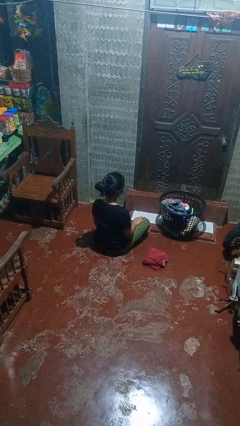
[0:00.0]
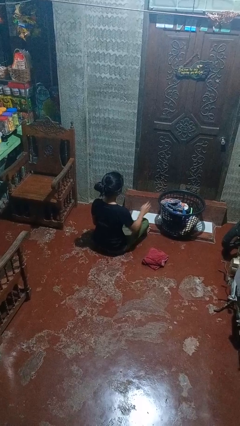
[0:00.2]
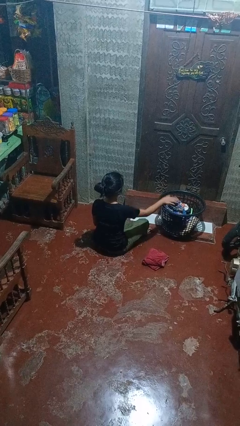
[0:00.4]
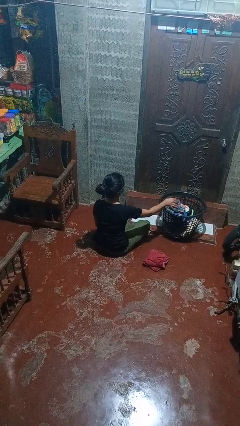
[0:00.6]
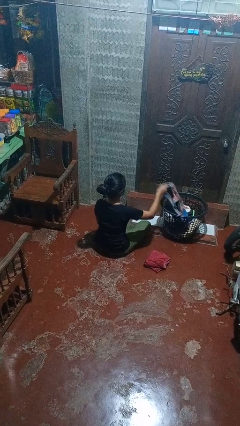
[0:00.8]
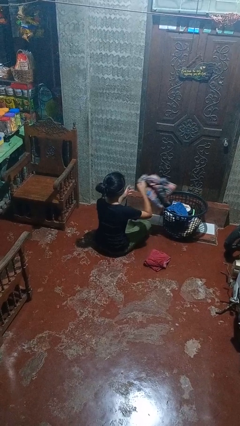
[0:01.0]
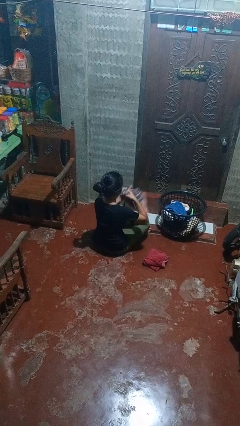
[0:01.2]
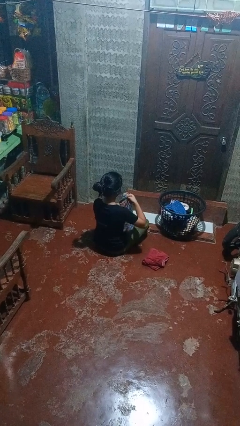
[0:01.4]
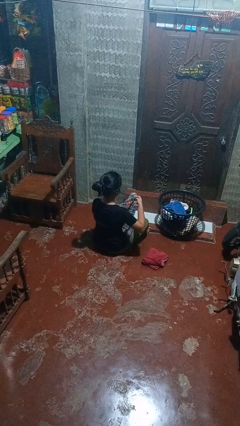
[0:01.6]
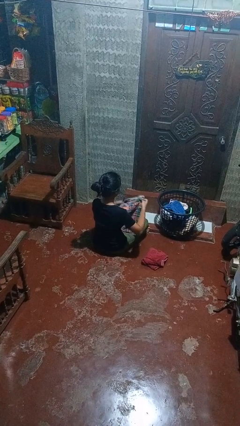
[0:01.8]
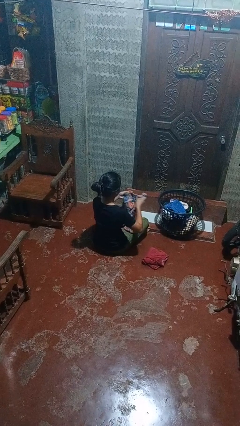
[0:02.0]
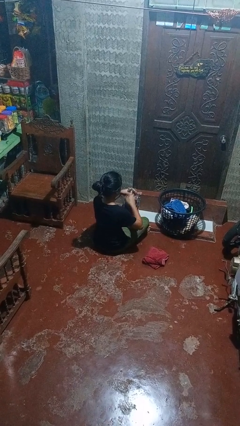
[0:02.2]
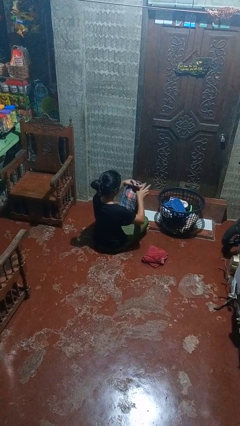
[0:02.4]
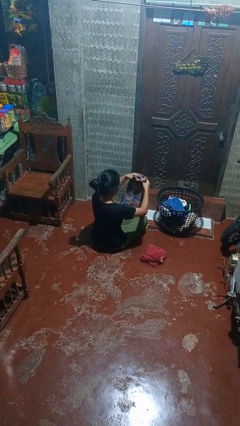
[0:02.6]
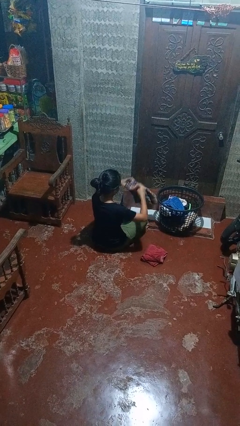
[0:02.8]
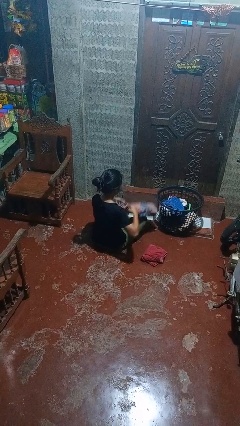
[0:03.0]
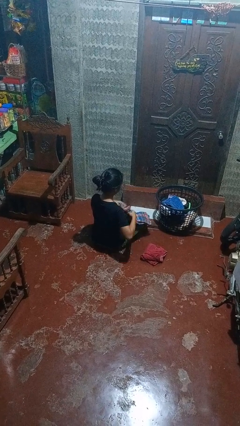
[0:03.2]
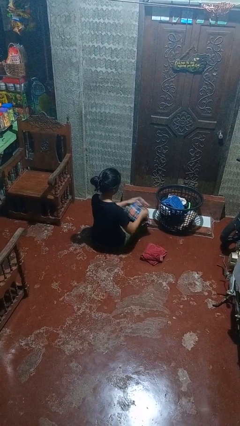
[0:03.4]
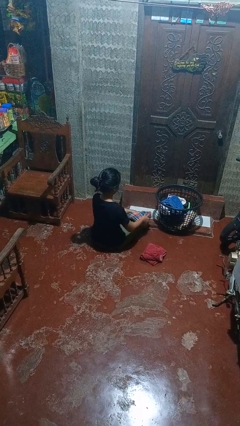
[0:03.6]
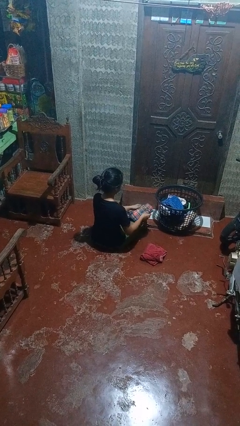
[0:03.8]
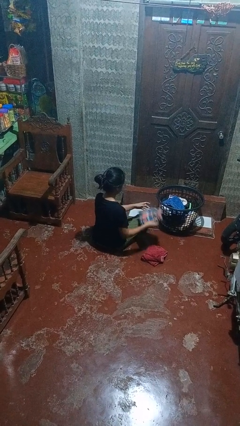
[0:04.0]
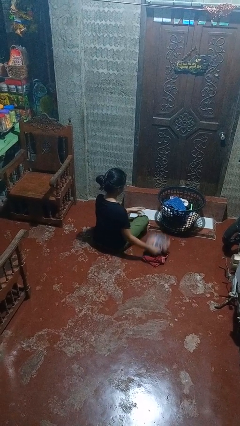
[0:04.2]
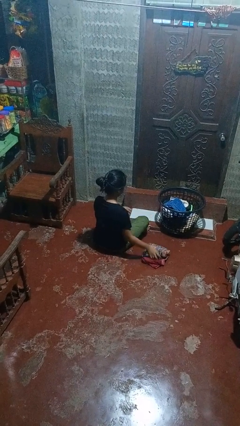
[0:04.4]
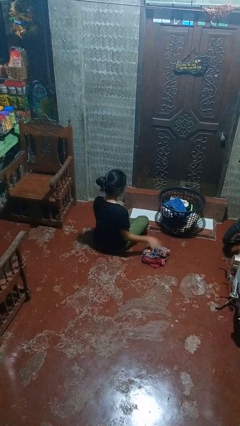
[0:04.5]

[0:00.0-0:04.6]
person folds pants

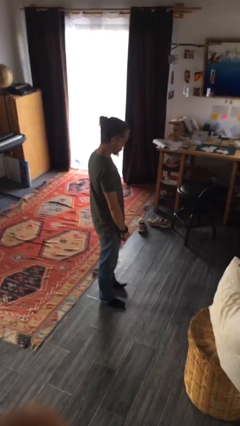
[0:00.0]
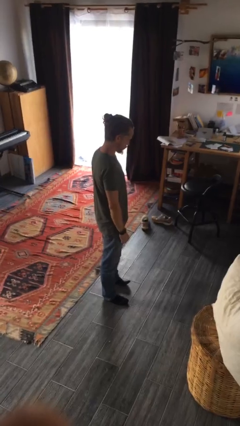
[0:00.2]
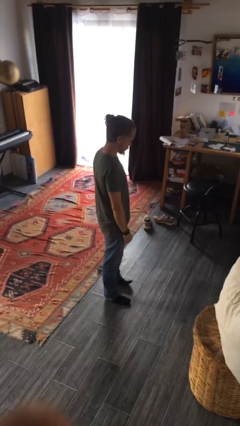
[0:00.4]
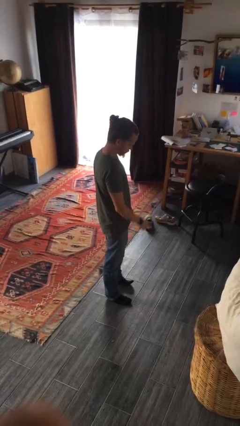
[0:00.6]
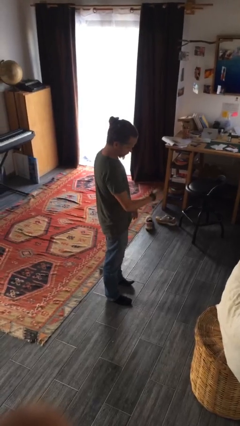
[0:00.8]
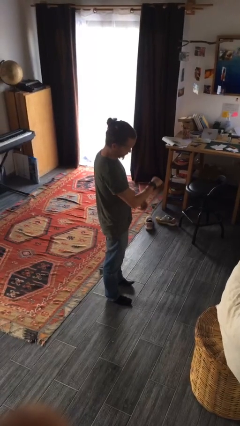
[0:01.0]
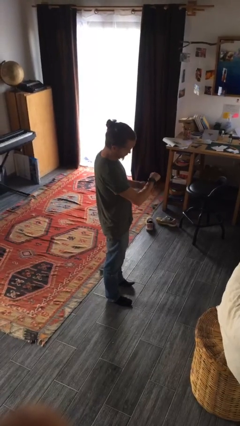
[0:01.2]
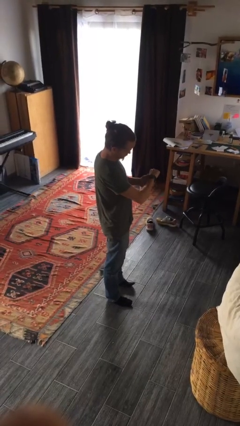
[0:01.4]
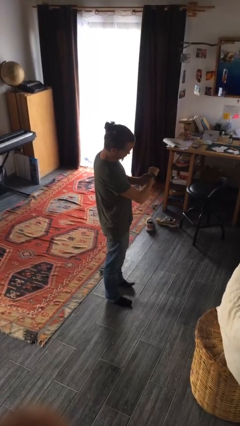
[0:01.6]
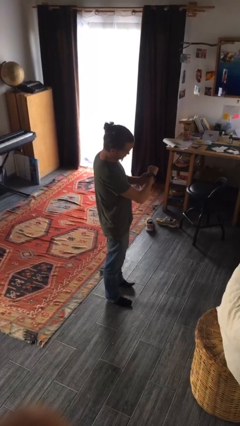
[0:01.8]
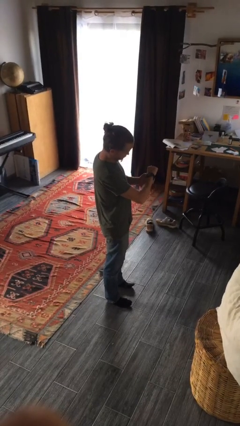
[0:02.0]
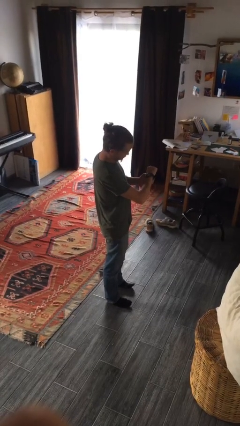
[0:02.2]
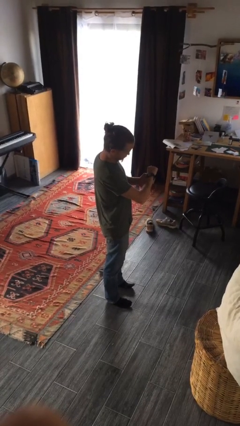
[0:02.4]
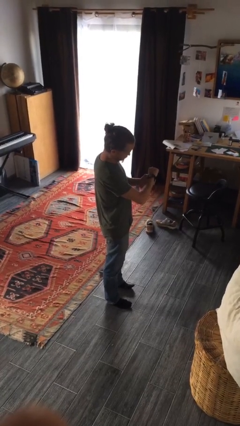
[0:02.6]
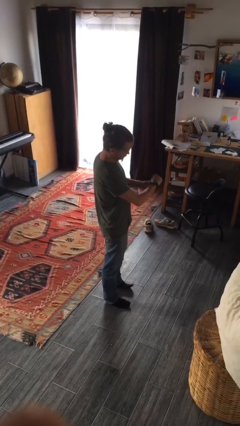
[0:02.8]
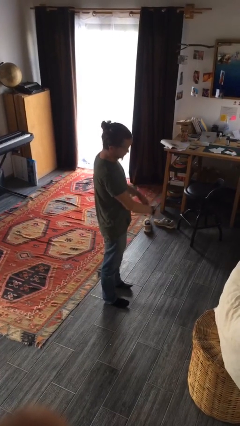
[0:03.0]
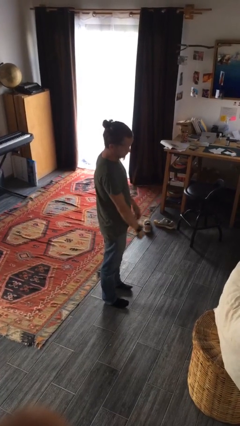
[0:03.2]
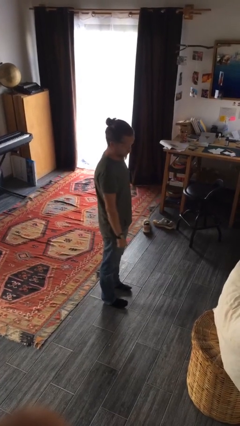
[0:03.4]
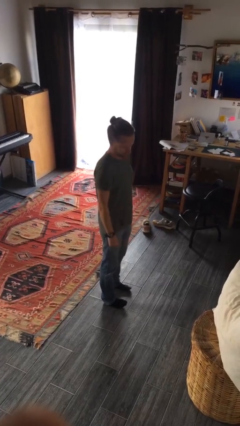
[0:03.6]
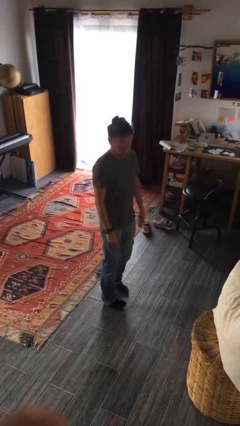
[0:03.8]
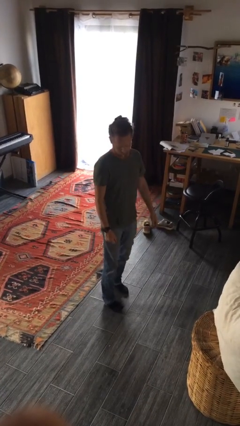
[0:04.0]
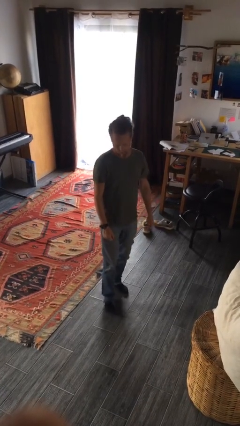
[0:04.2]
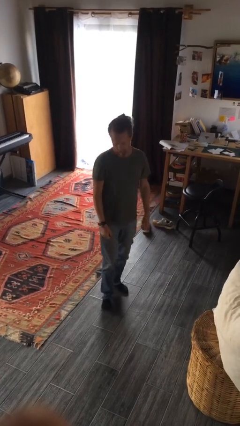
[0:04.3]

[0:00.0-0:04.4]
person looks at wristwatch

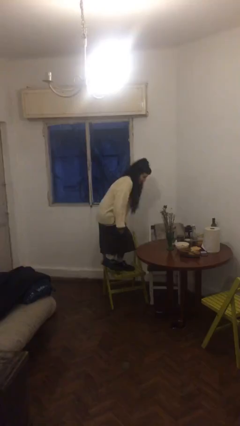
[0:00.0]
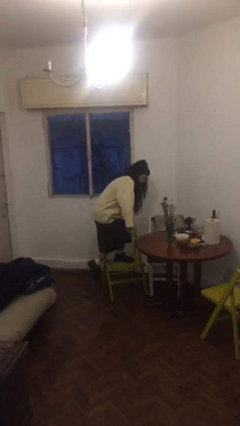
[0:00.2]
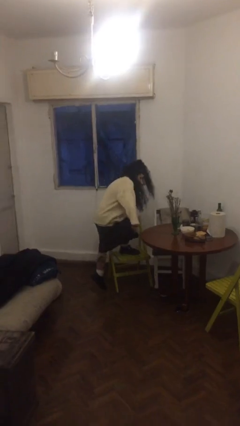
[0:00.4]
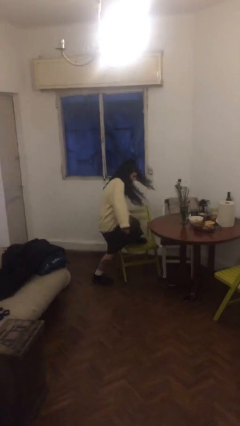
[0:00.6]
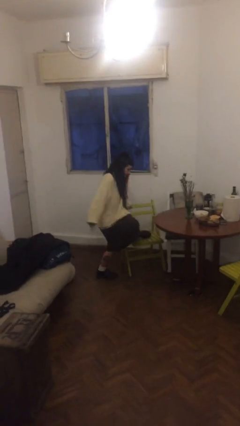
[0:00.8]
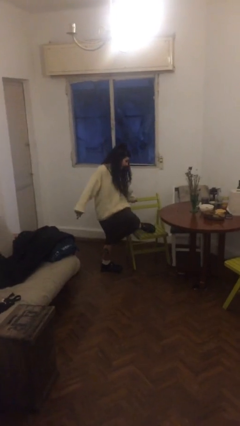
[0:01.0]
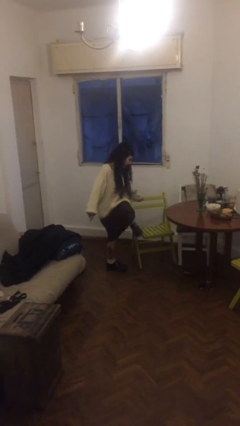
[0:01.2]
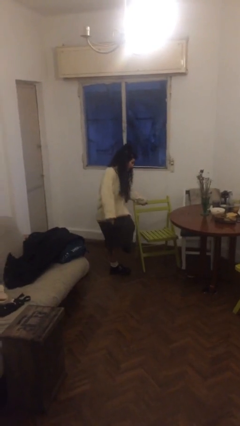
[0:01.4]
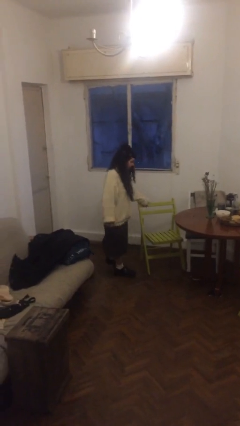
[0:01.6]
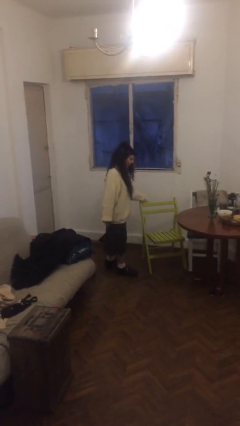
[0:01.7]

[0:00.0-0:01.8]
person climbs off chair

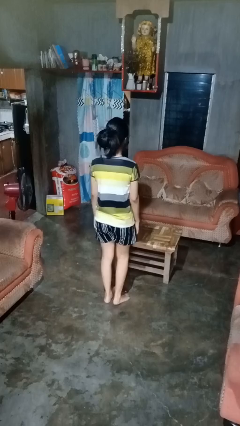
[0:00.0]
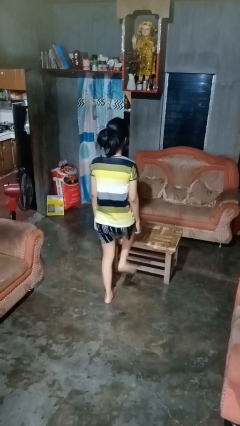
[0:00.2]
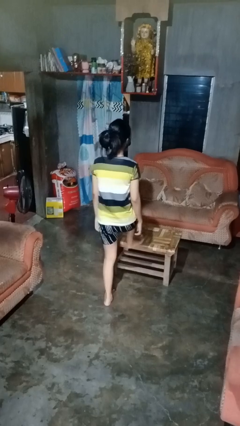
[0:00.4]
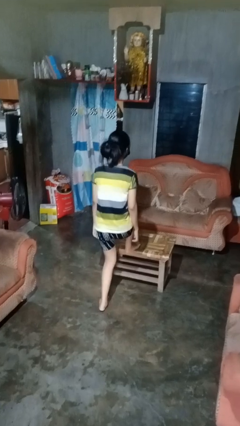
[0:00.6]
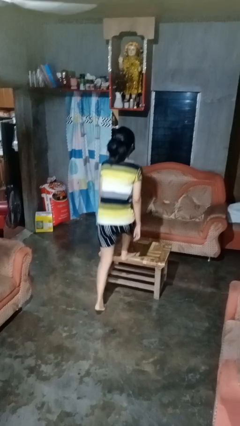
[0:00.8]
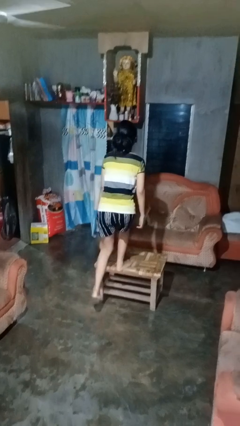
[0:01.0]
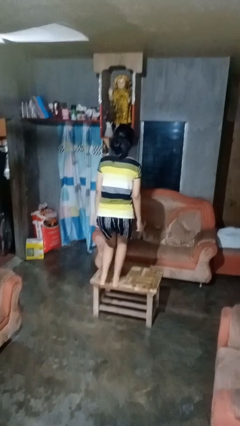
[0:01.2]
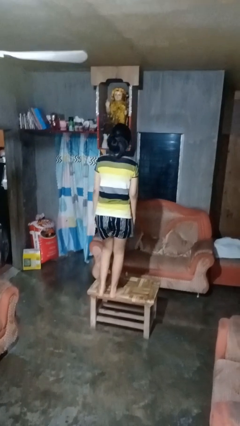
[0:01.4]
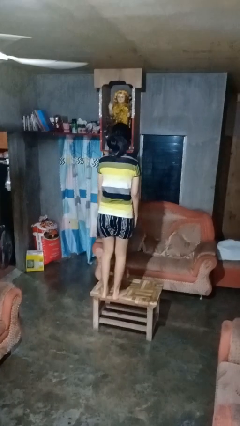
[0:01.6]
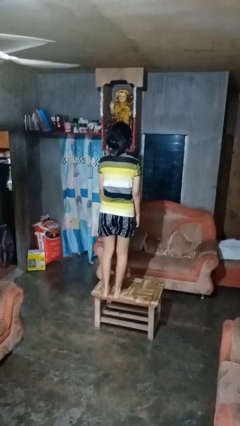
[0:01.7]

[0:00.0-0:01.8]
person climbs on table

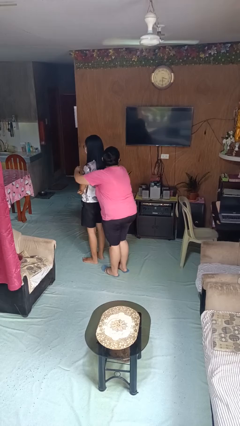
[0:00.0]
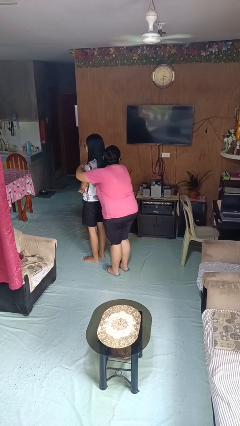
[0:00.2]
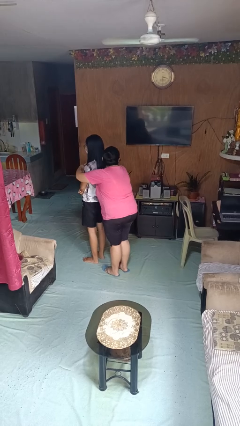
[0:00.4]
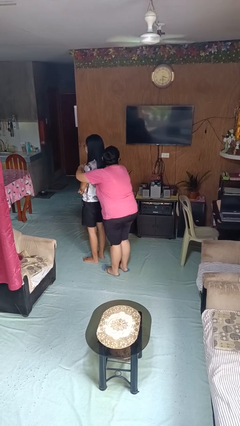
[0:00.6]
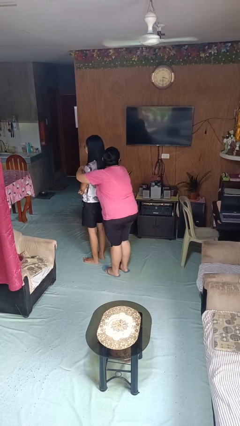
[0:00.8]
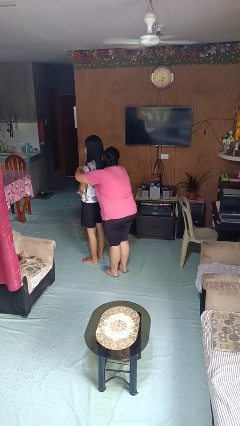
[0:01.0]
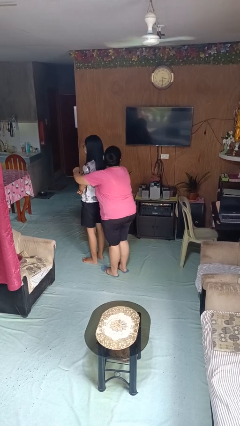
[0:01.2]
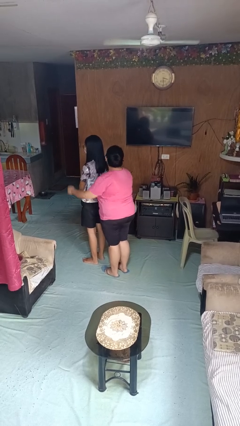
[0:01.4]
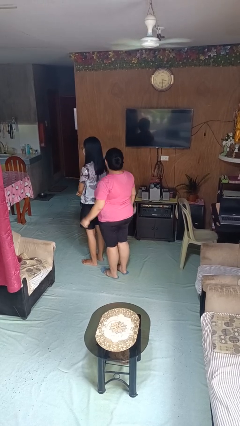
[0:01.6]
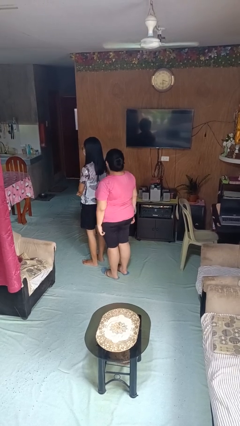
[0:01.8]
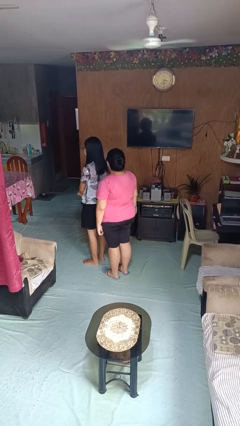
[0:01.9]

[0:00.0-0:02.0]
person hugs person from behind

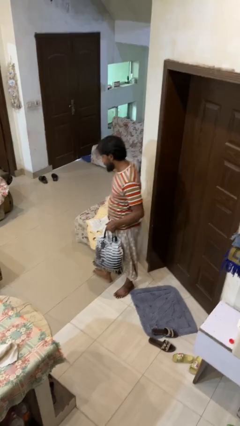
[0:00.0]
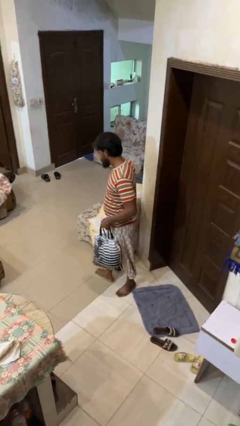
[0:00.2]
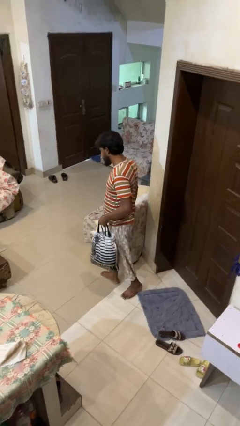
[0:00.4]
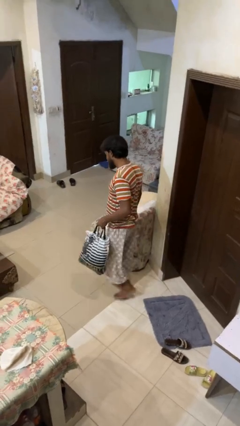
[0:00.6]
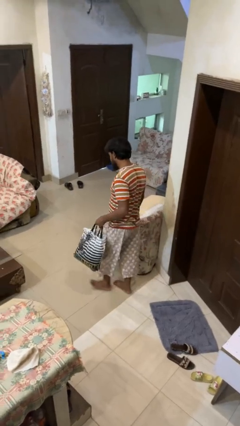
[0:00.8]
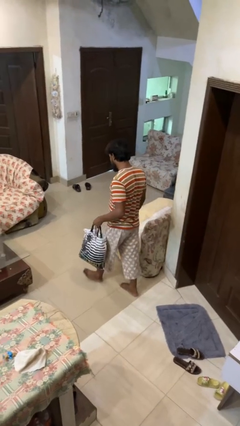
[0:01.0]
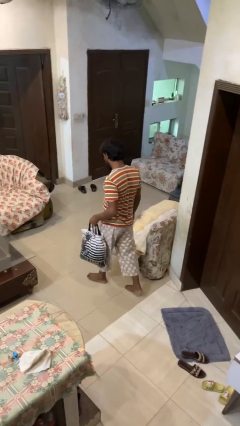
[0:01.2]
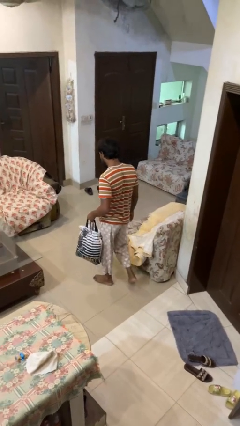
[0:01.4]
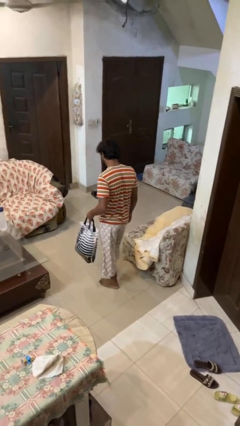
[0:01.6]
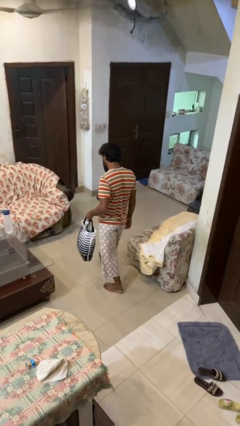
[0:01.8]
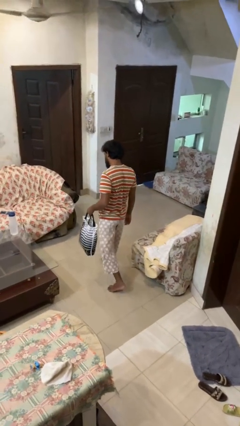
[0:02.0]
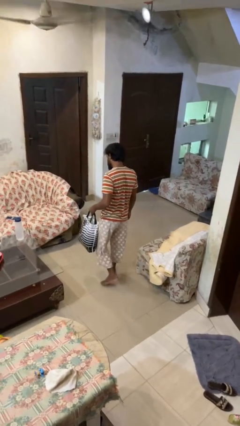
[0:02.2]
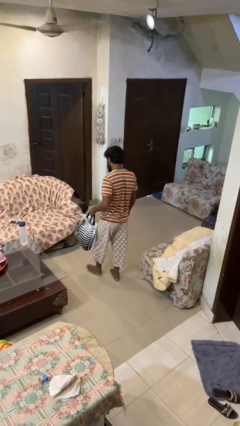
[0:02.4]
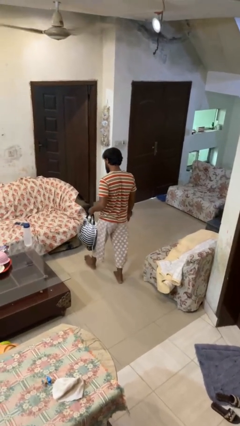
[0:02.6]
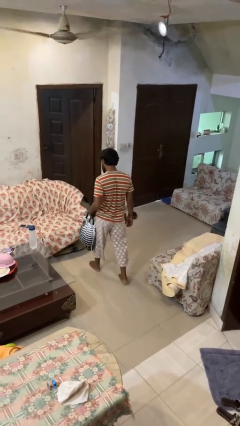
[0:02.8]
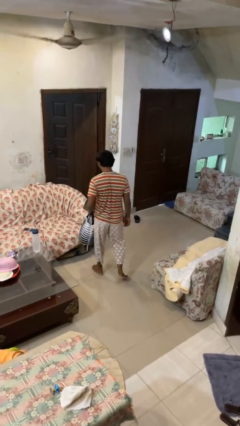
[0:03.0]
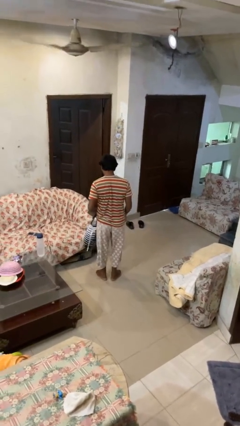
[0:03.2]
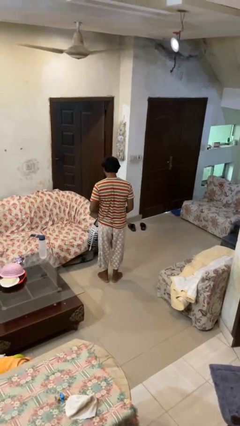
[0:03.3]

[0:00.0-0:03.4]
person carries groceries
